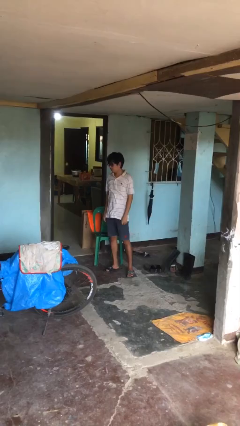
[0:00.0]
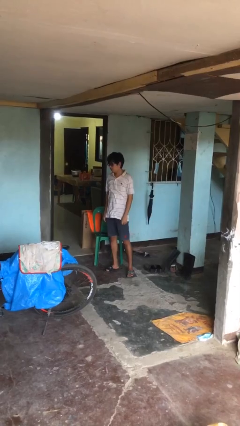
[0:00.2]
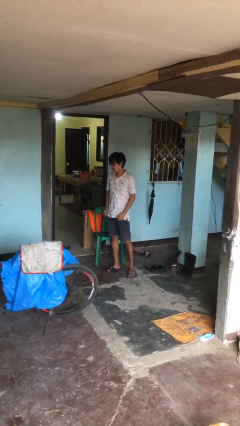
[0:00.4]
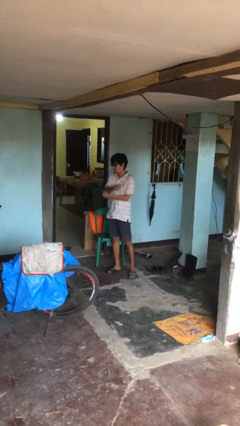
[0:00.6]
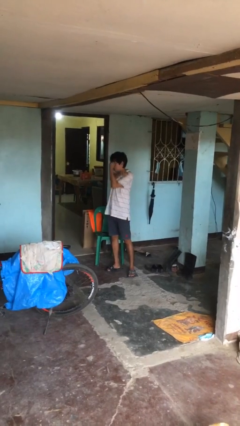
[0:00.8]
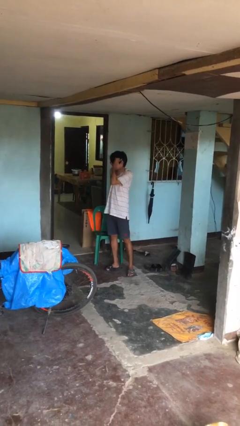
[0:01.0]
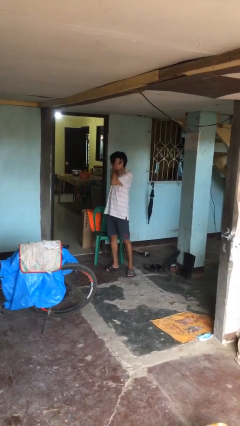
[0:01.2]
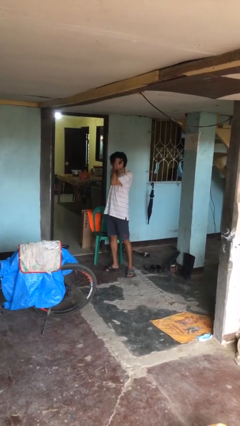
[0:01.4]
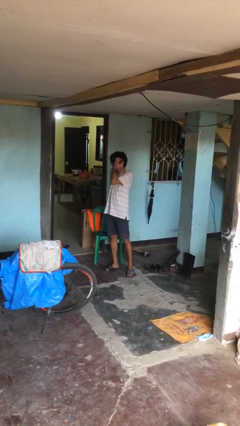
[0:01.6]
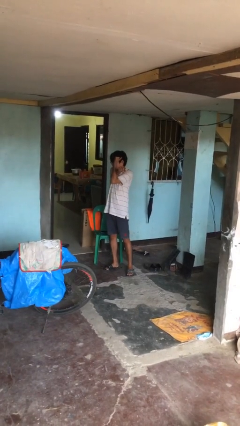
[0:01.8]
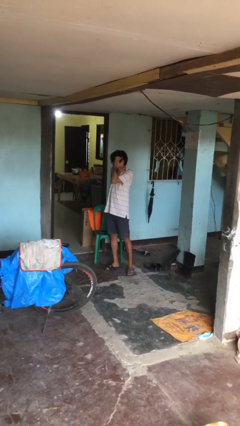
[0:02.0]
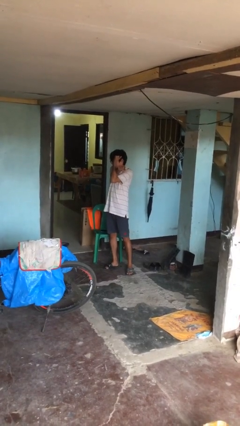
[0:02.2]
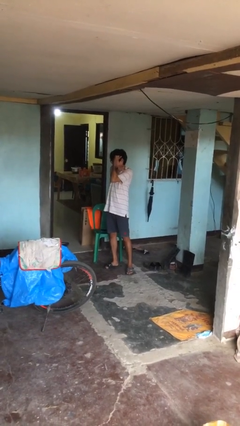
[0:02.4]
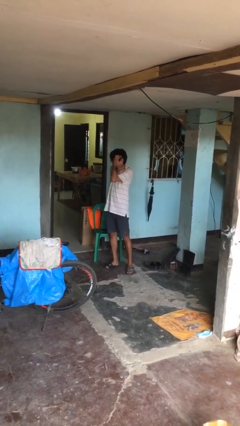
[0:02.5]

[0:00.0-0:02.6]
person crosses arms

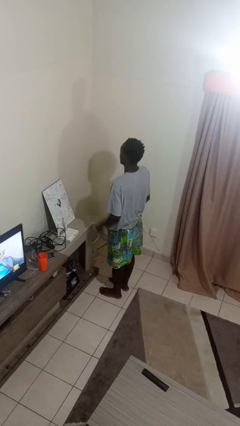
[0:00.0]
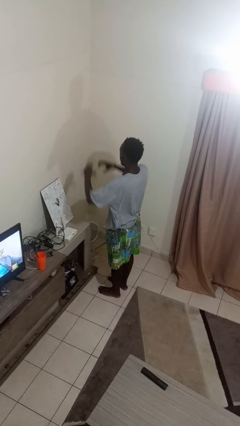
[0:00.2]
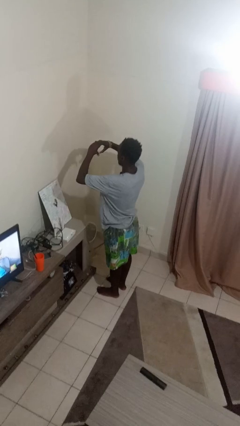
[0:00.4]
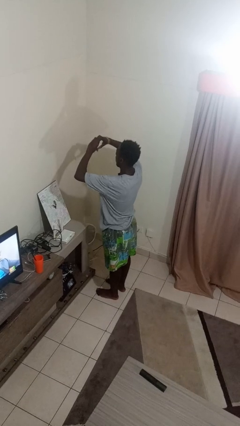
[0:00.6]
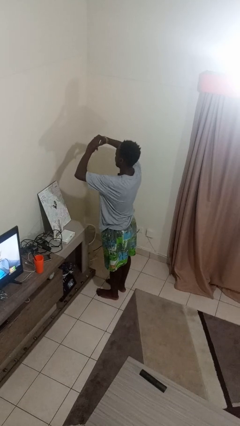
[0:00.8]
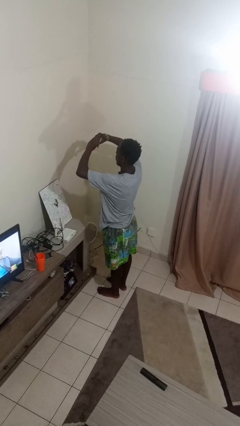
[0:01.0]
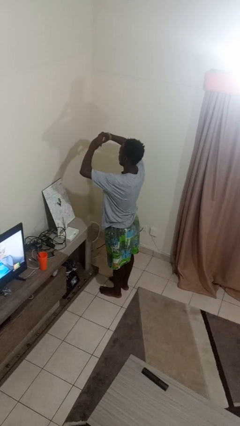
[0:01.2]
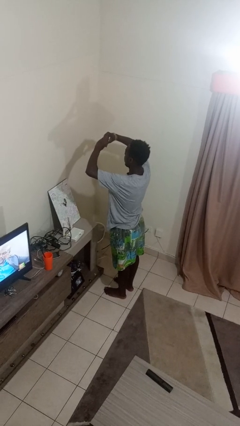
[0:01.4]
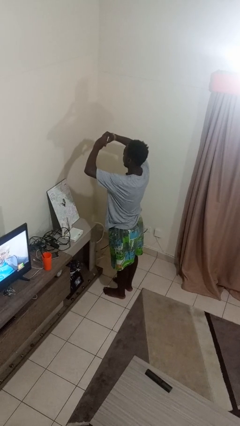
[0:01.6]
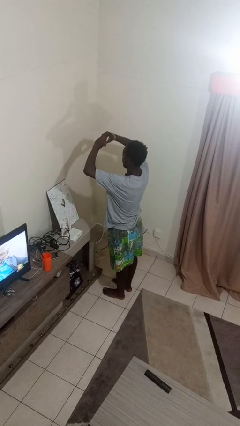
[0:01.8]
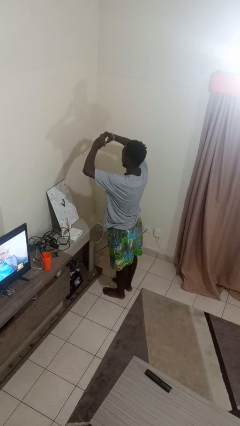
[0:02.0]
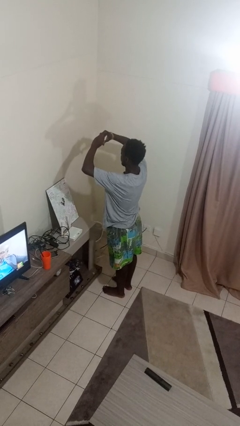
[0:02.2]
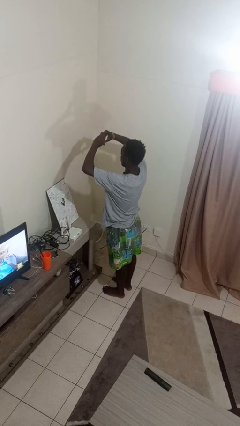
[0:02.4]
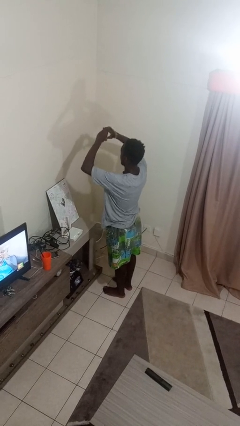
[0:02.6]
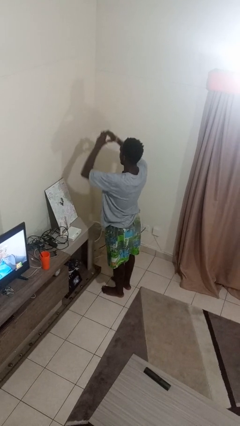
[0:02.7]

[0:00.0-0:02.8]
person gestures heart

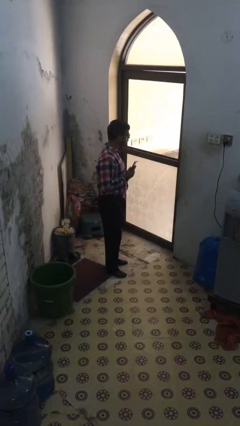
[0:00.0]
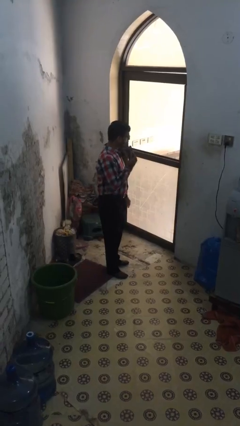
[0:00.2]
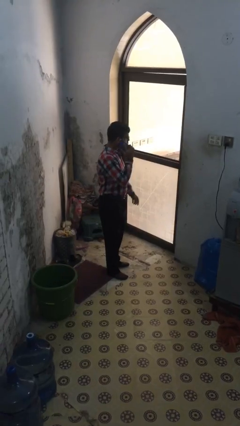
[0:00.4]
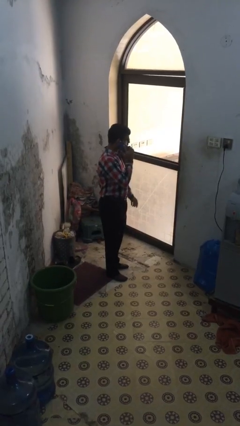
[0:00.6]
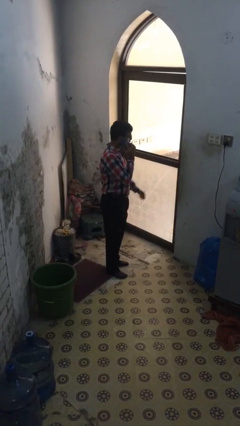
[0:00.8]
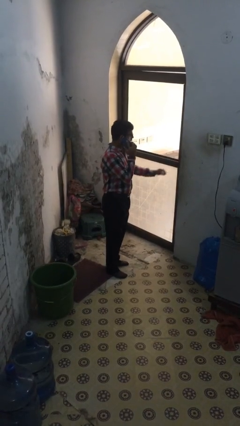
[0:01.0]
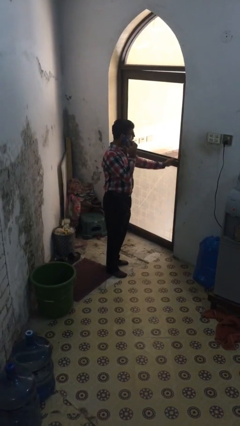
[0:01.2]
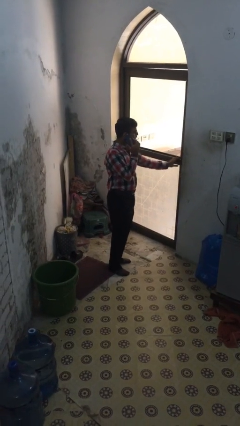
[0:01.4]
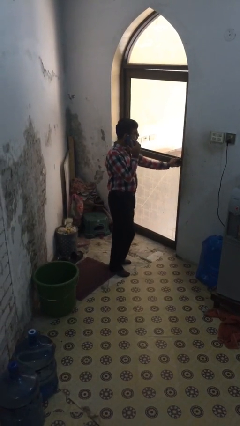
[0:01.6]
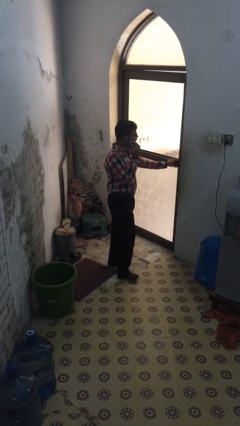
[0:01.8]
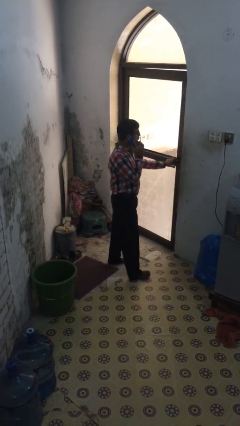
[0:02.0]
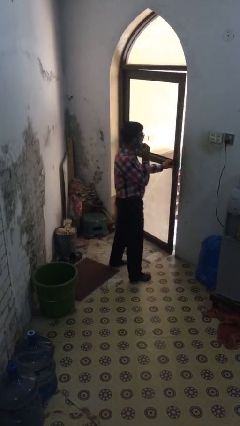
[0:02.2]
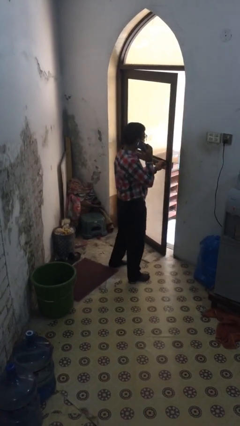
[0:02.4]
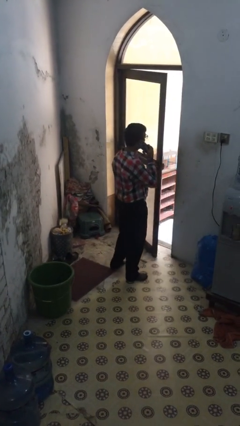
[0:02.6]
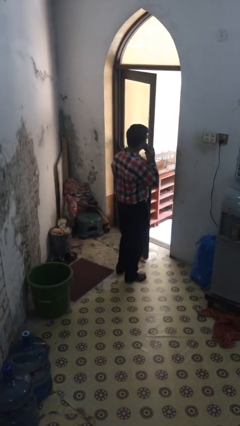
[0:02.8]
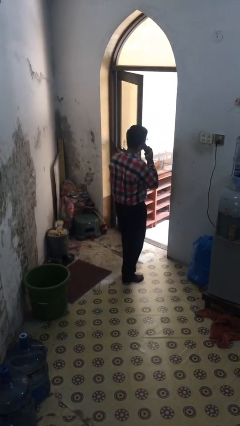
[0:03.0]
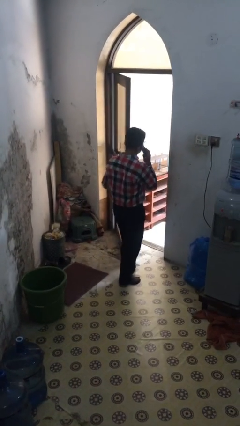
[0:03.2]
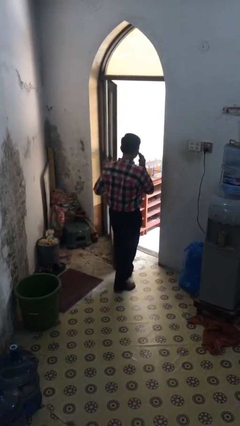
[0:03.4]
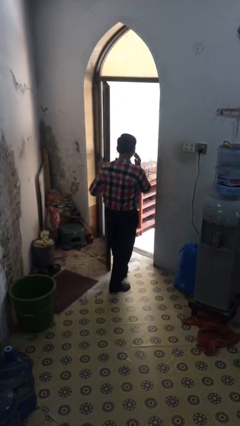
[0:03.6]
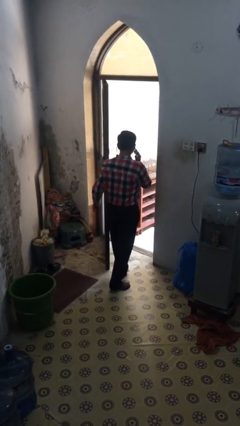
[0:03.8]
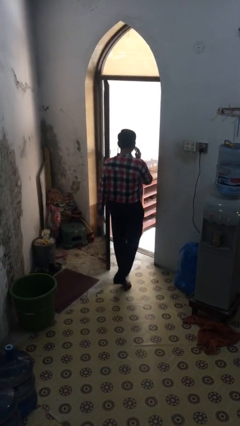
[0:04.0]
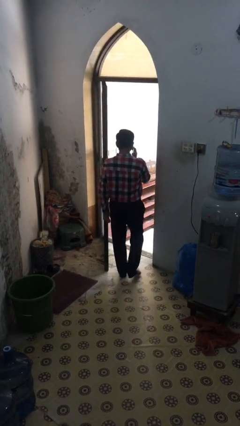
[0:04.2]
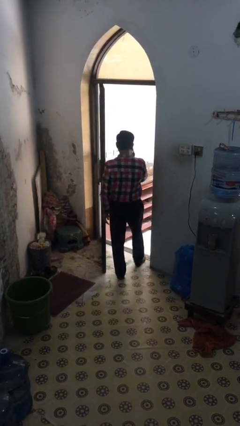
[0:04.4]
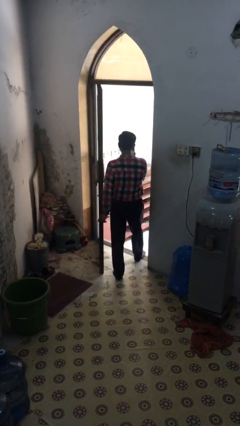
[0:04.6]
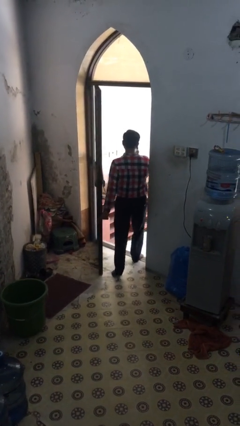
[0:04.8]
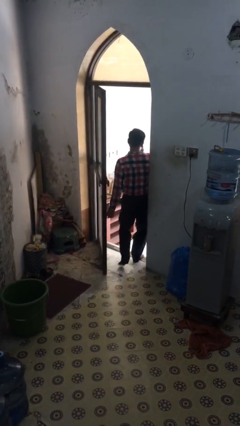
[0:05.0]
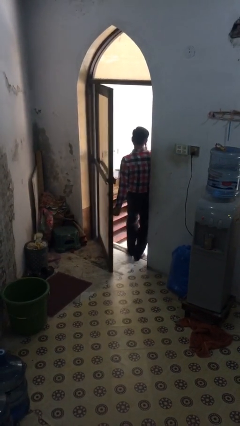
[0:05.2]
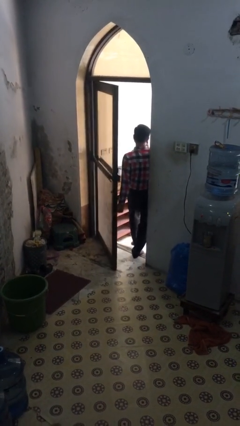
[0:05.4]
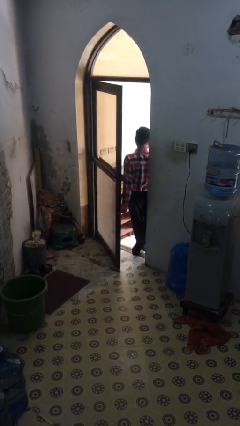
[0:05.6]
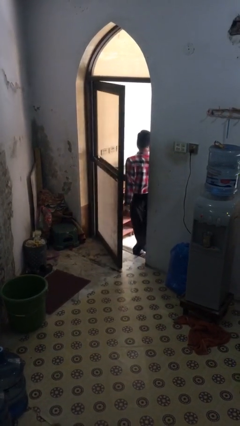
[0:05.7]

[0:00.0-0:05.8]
person exits scene through structure

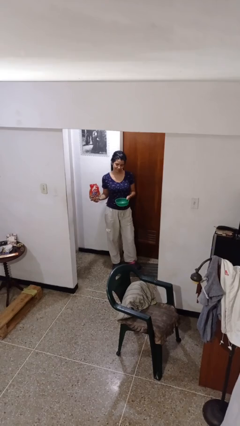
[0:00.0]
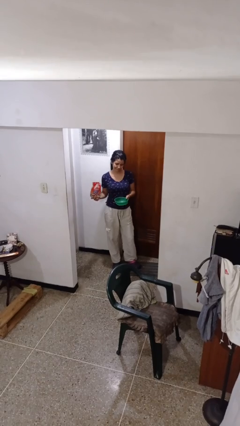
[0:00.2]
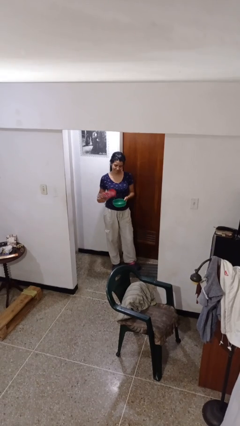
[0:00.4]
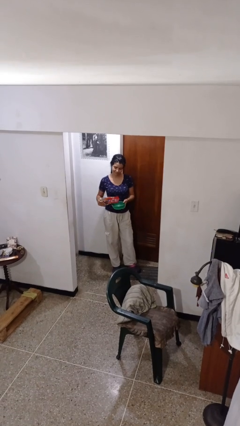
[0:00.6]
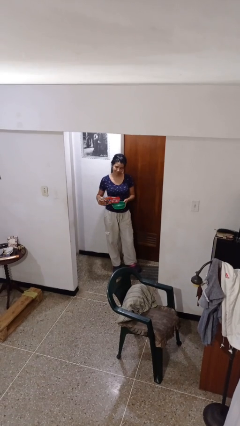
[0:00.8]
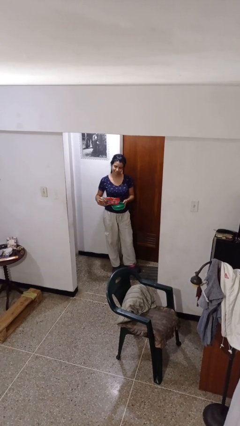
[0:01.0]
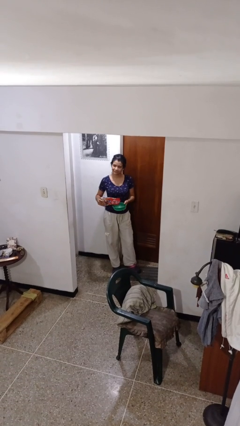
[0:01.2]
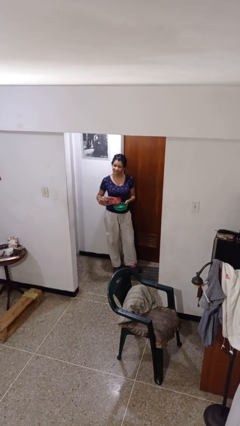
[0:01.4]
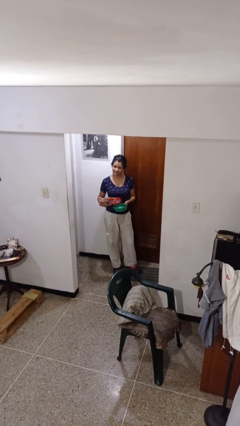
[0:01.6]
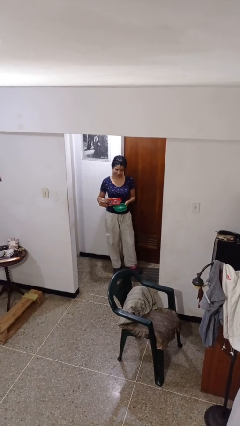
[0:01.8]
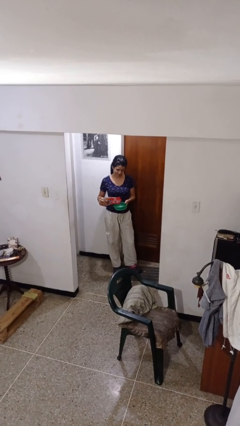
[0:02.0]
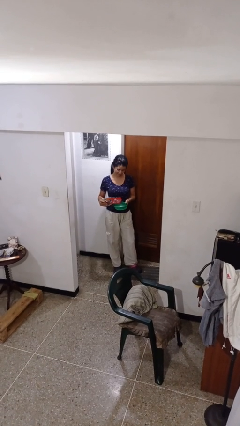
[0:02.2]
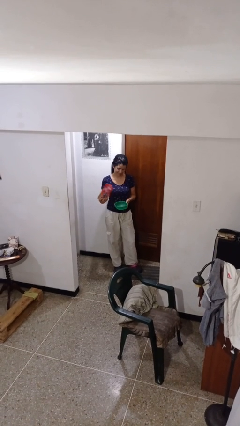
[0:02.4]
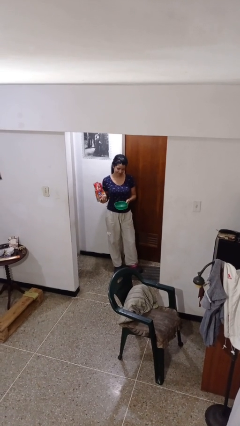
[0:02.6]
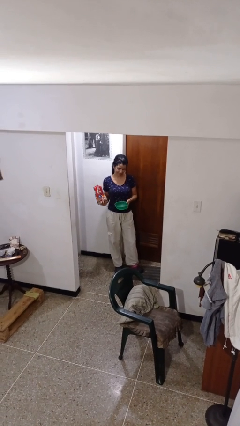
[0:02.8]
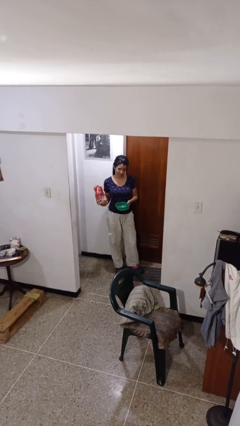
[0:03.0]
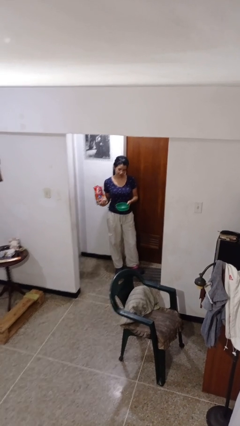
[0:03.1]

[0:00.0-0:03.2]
person pours into bowl

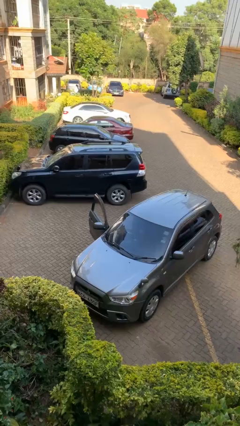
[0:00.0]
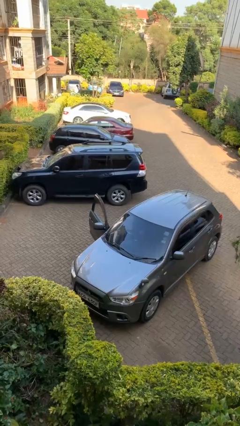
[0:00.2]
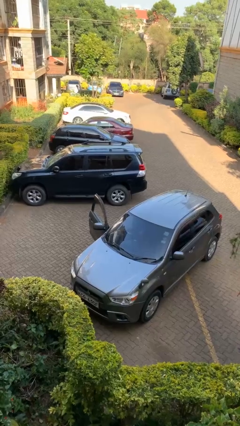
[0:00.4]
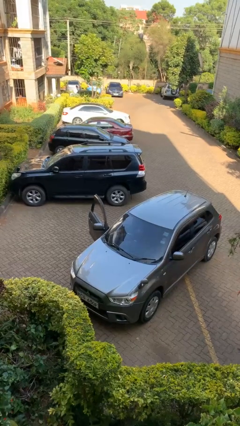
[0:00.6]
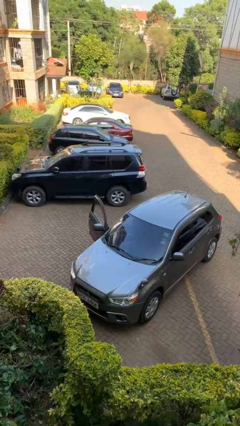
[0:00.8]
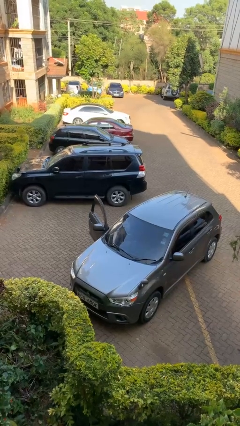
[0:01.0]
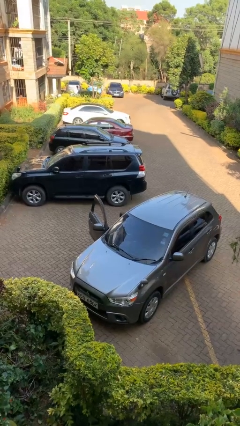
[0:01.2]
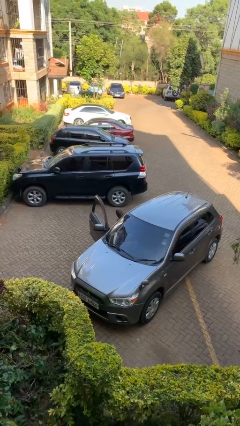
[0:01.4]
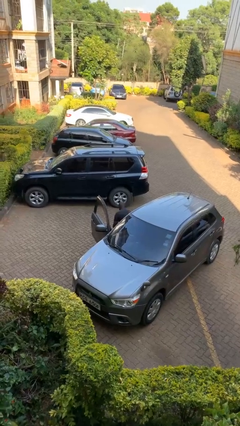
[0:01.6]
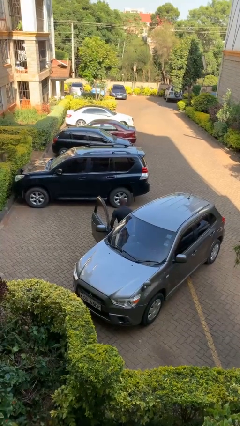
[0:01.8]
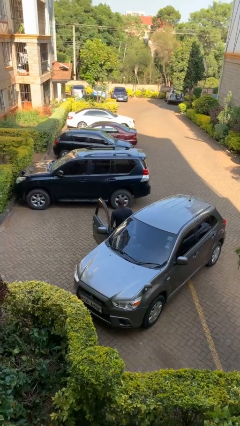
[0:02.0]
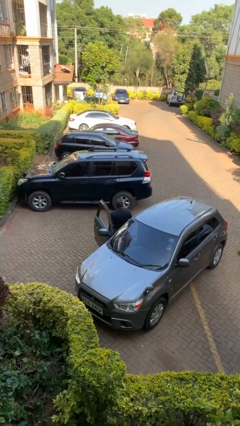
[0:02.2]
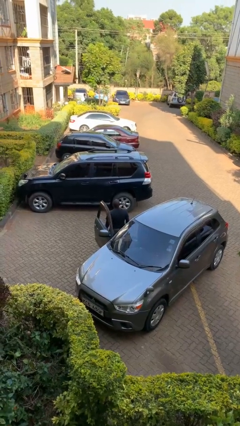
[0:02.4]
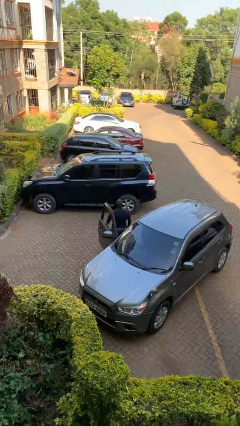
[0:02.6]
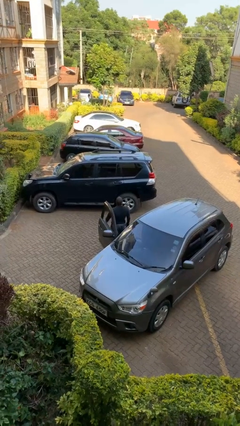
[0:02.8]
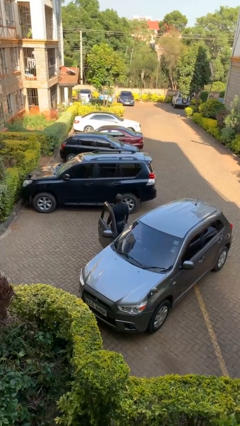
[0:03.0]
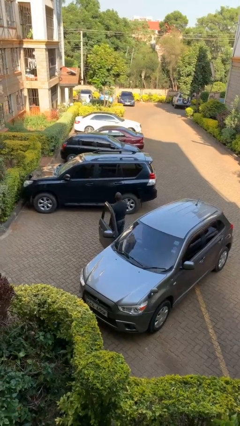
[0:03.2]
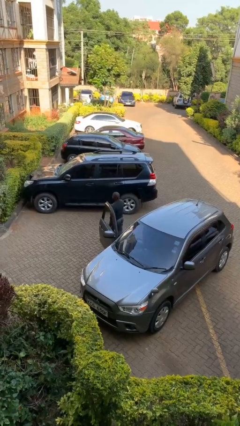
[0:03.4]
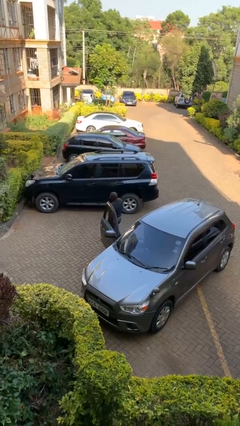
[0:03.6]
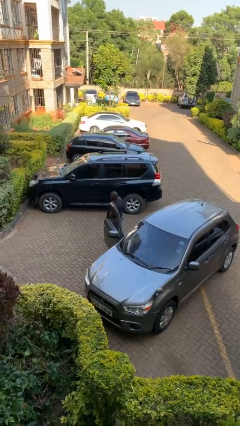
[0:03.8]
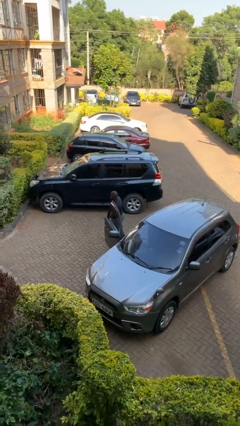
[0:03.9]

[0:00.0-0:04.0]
person exits car
